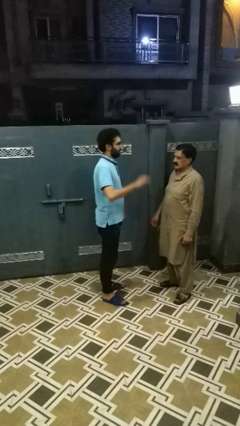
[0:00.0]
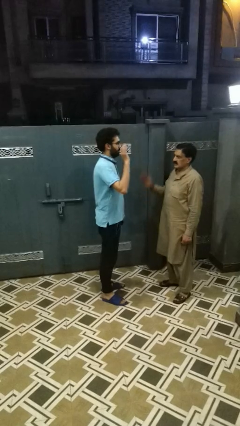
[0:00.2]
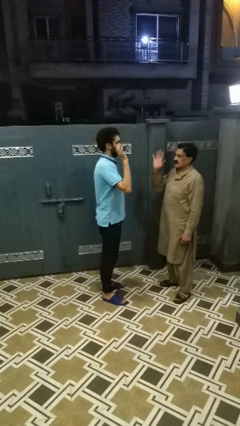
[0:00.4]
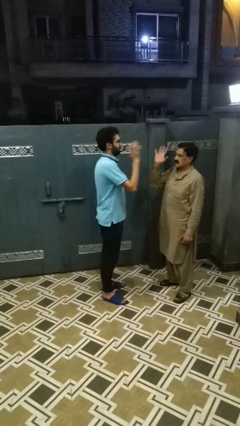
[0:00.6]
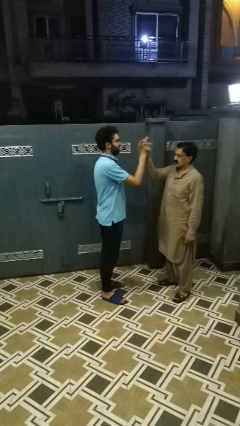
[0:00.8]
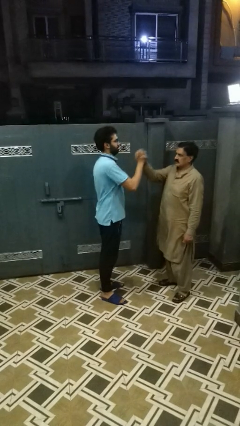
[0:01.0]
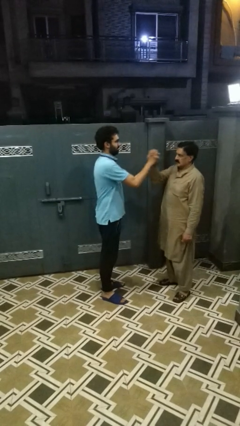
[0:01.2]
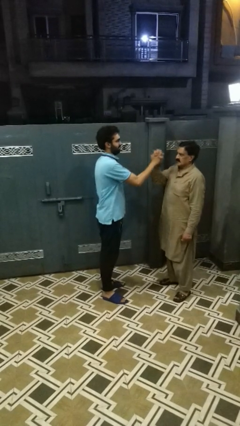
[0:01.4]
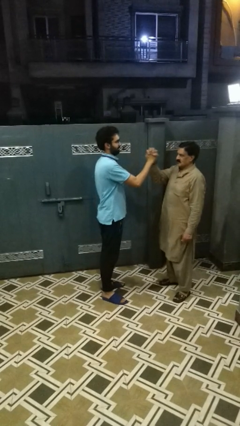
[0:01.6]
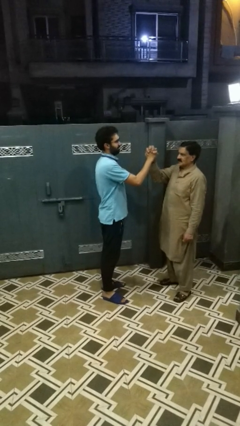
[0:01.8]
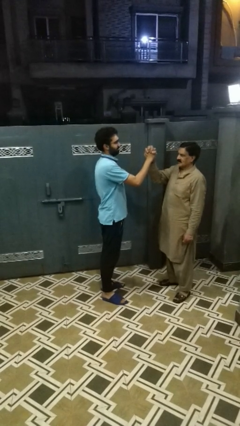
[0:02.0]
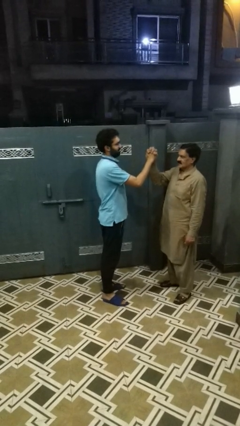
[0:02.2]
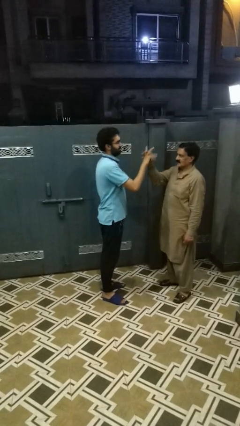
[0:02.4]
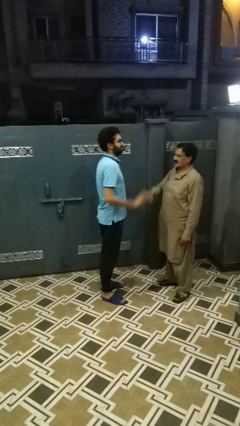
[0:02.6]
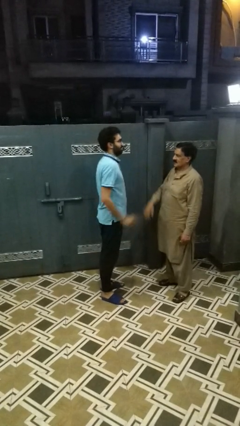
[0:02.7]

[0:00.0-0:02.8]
person highfives hand

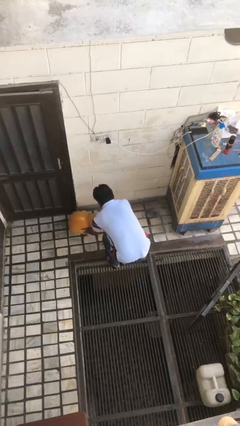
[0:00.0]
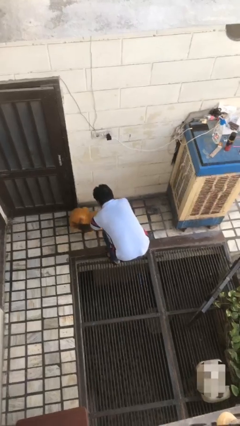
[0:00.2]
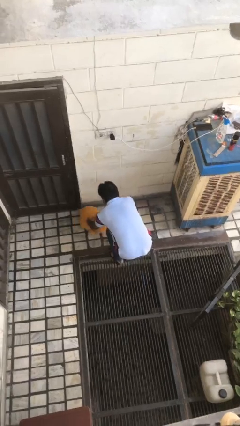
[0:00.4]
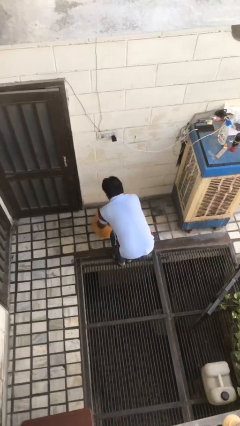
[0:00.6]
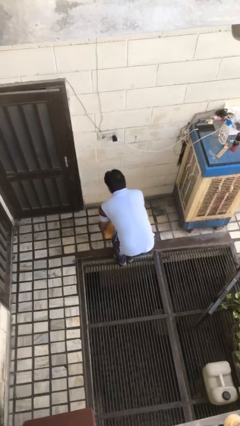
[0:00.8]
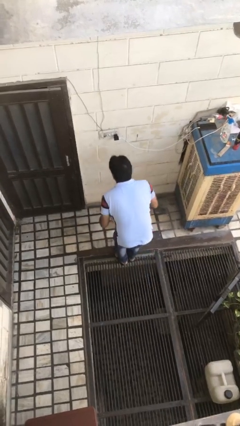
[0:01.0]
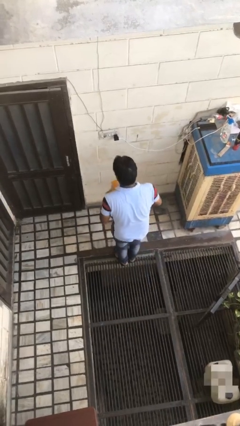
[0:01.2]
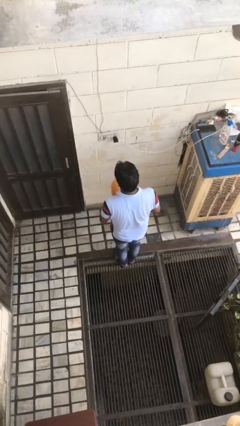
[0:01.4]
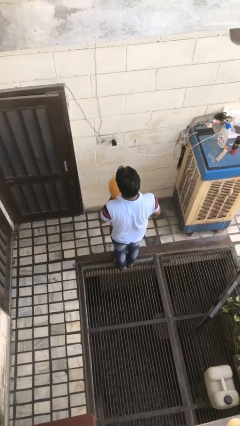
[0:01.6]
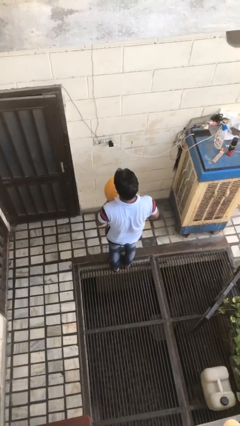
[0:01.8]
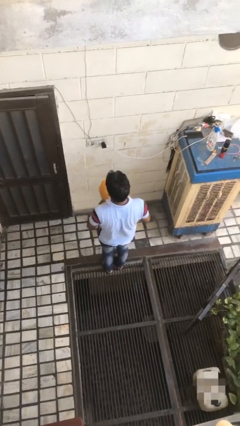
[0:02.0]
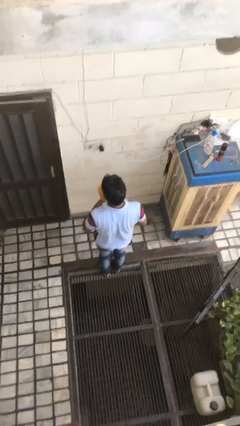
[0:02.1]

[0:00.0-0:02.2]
person picks up object from floor

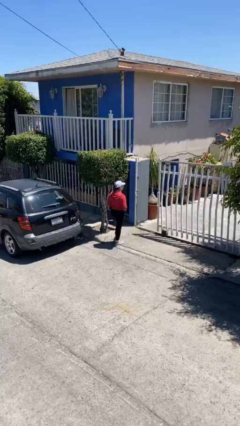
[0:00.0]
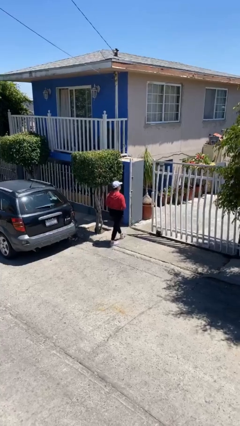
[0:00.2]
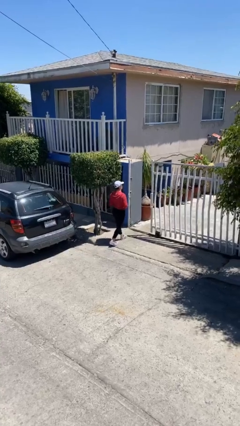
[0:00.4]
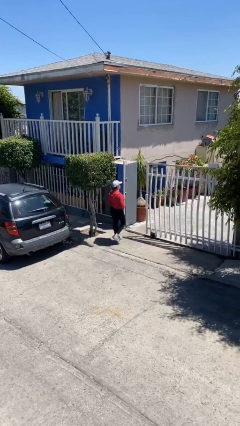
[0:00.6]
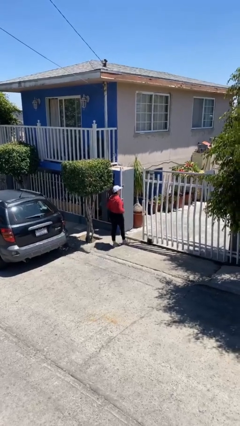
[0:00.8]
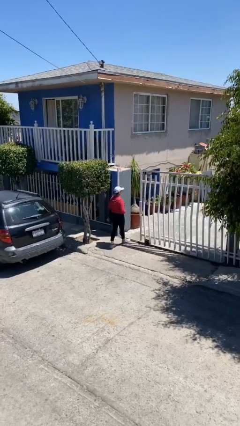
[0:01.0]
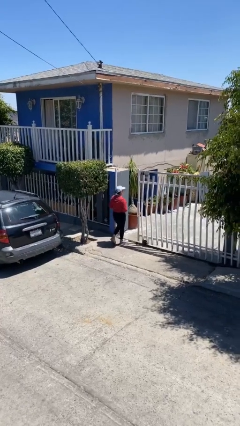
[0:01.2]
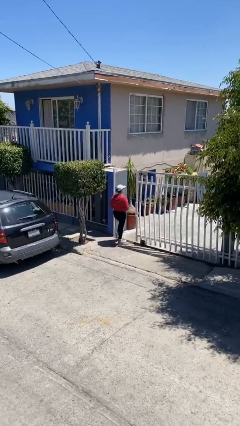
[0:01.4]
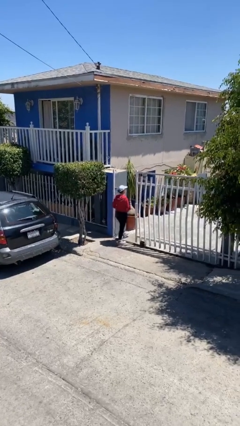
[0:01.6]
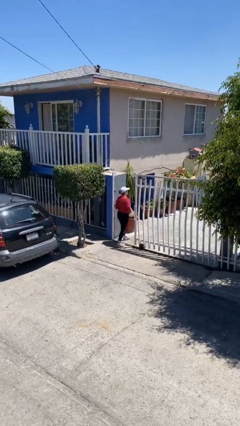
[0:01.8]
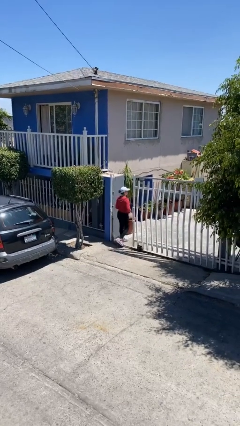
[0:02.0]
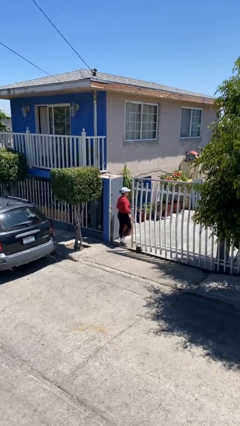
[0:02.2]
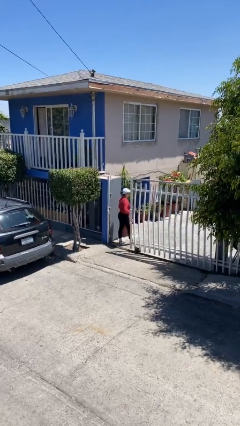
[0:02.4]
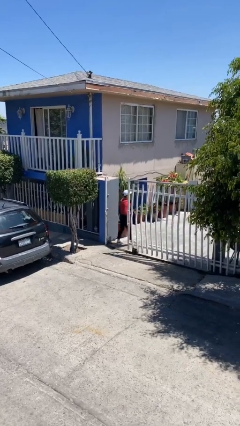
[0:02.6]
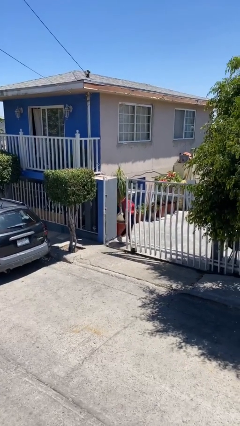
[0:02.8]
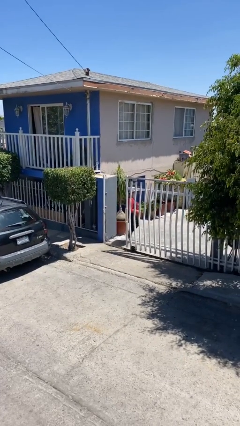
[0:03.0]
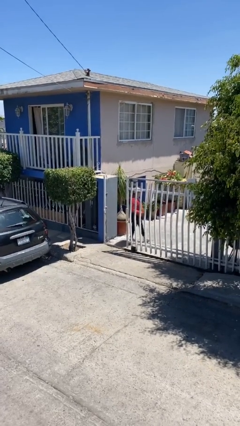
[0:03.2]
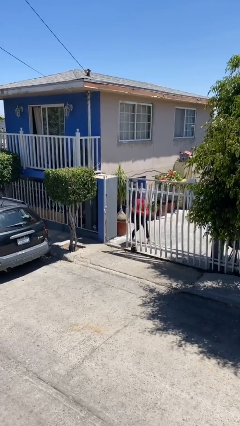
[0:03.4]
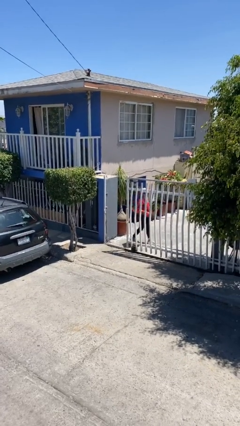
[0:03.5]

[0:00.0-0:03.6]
person exits scene through structure

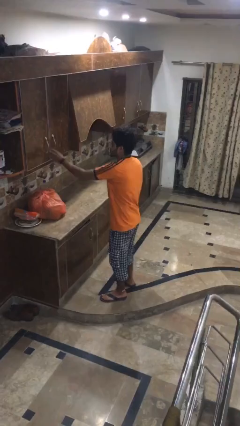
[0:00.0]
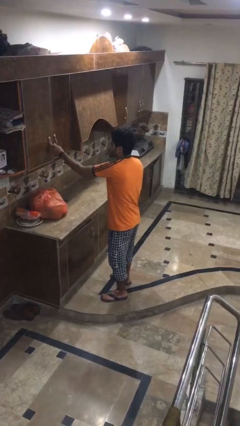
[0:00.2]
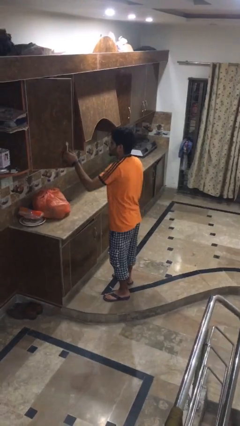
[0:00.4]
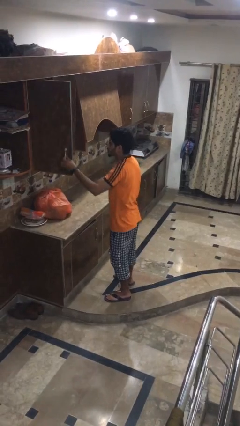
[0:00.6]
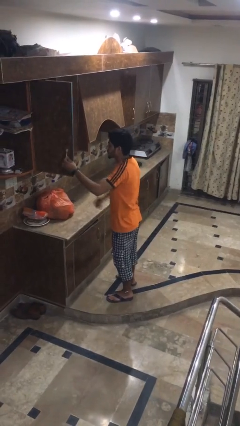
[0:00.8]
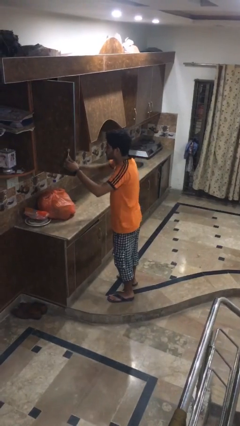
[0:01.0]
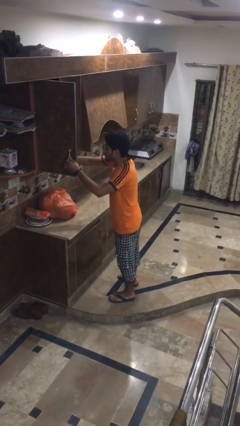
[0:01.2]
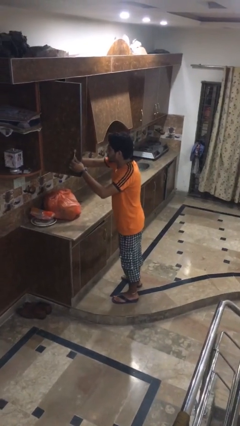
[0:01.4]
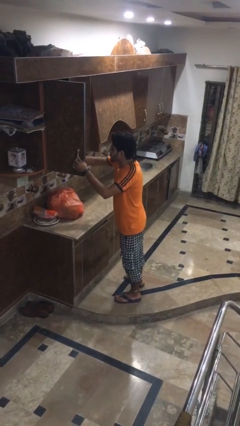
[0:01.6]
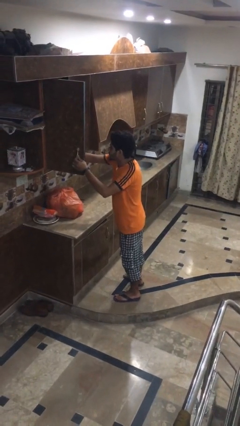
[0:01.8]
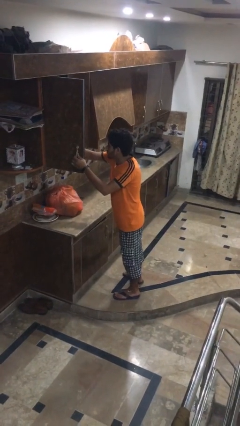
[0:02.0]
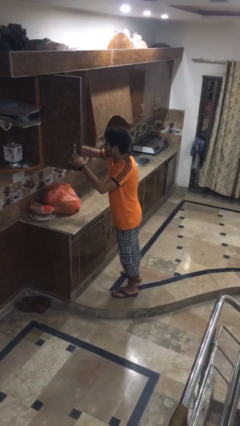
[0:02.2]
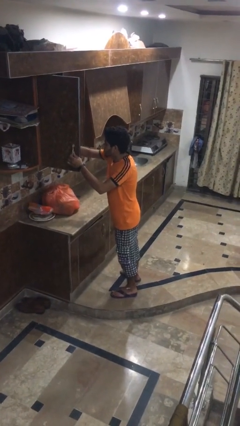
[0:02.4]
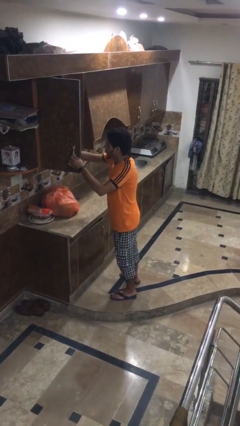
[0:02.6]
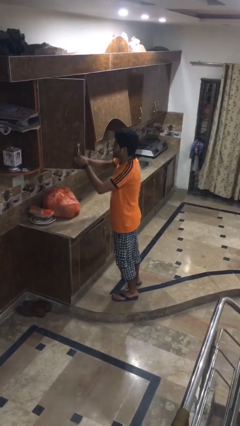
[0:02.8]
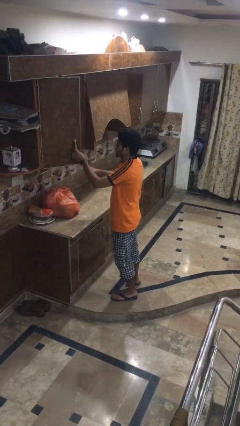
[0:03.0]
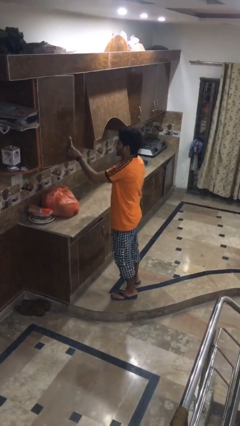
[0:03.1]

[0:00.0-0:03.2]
person searches in kitchen drawer

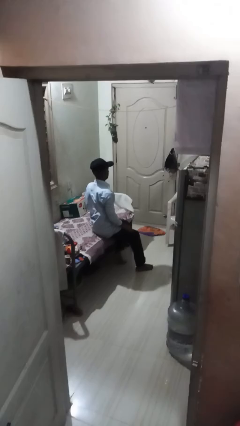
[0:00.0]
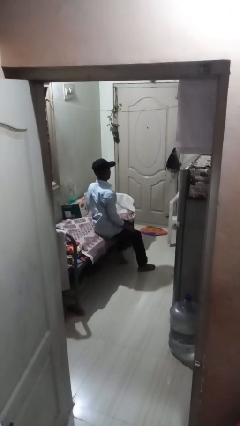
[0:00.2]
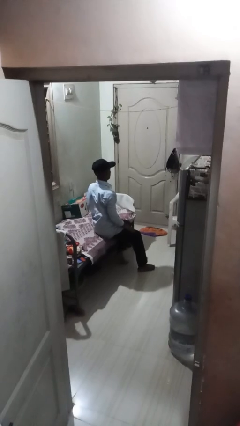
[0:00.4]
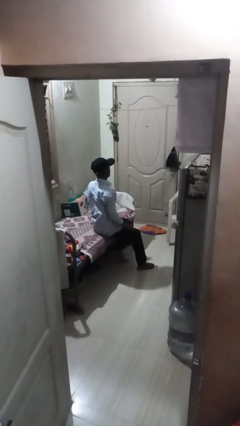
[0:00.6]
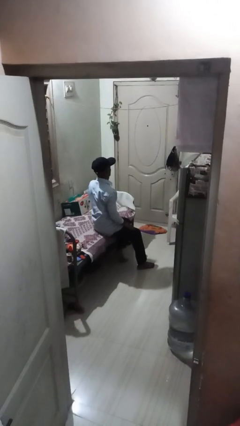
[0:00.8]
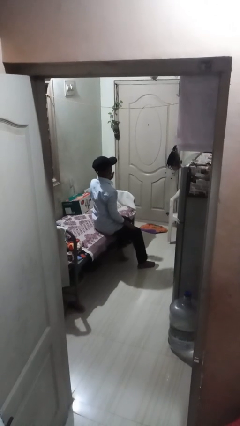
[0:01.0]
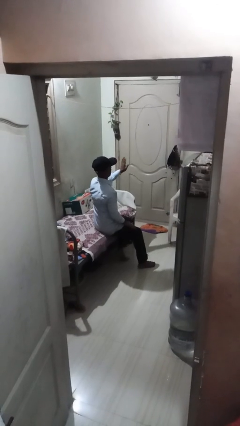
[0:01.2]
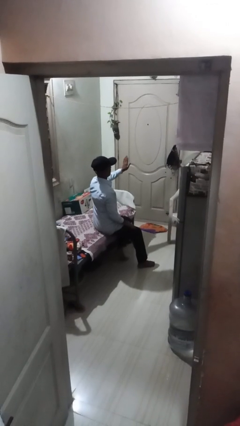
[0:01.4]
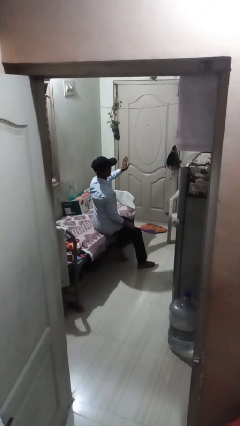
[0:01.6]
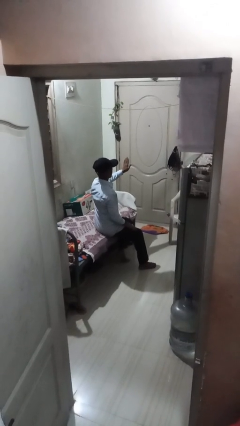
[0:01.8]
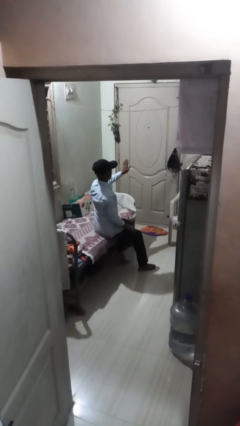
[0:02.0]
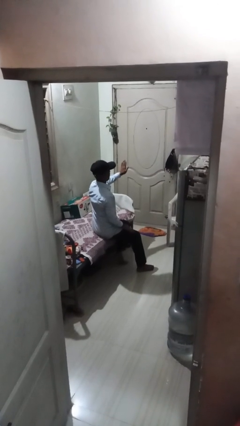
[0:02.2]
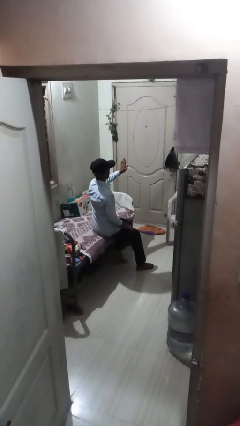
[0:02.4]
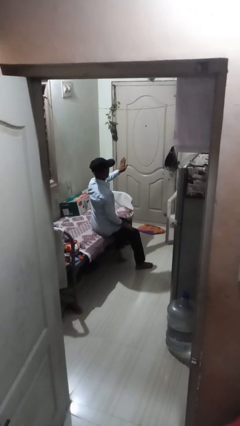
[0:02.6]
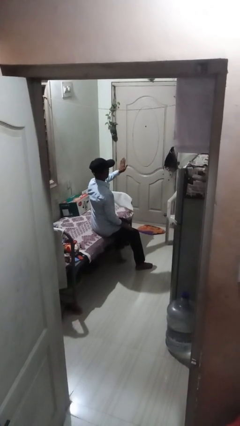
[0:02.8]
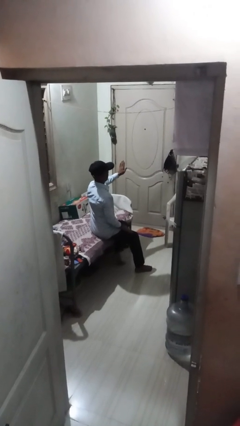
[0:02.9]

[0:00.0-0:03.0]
person gestures stop

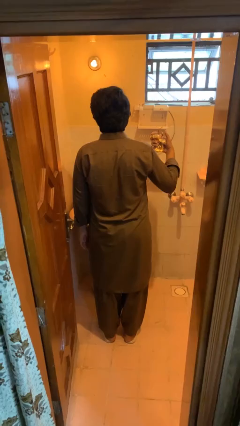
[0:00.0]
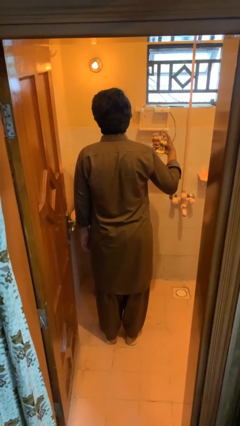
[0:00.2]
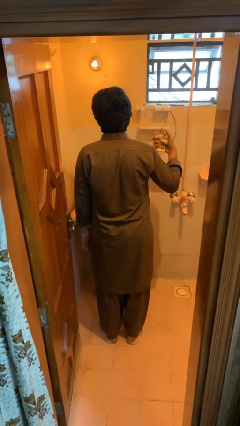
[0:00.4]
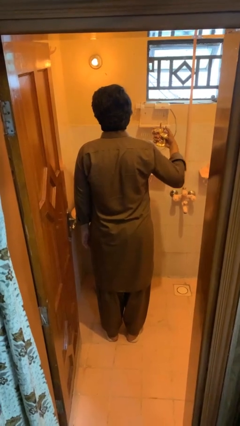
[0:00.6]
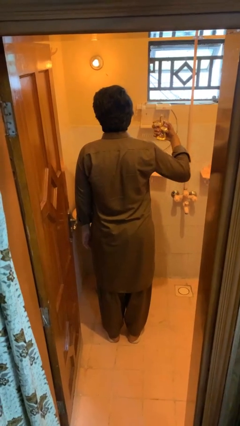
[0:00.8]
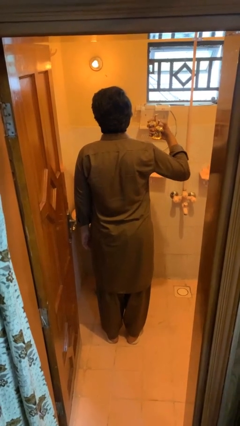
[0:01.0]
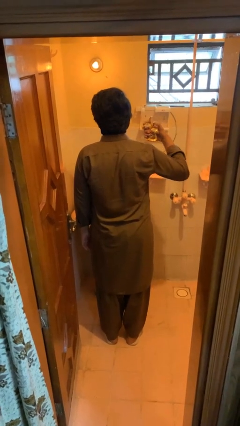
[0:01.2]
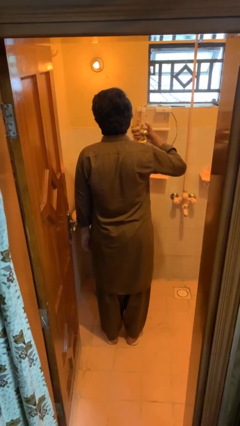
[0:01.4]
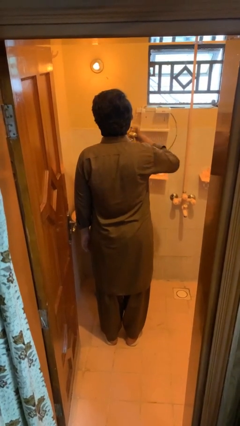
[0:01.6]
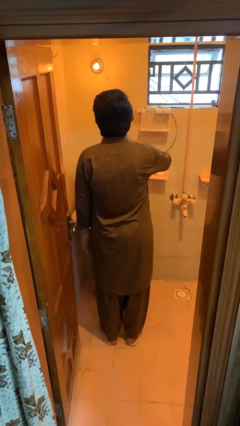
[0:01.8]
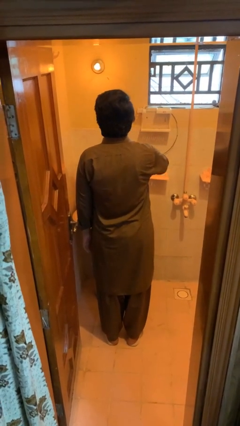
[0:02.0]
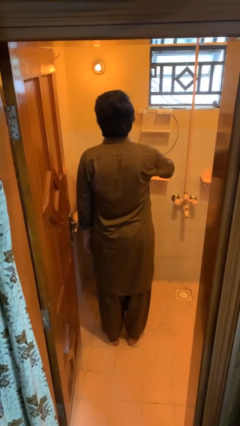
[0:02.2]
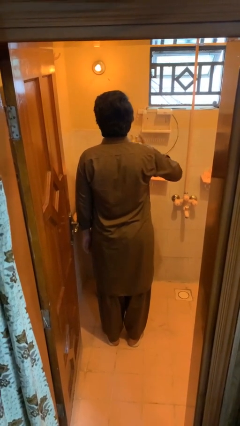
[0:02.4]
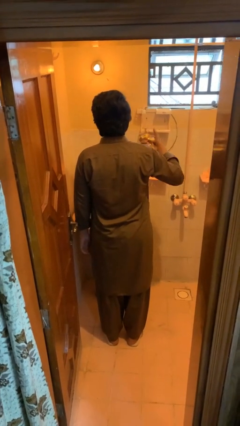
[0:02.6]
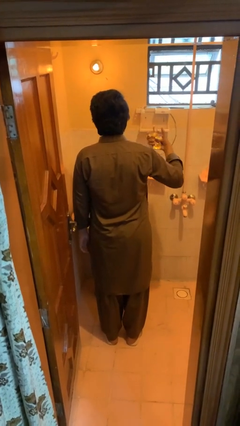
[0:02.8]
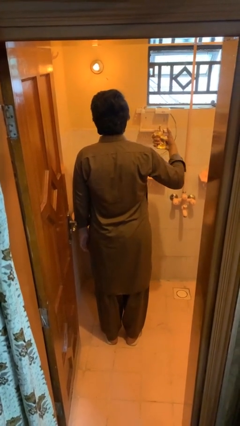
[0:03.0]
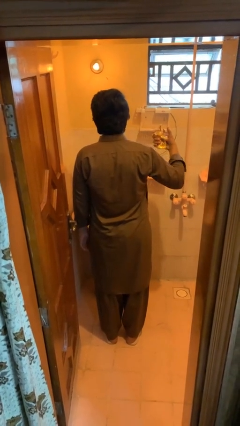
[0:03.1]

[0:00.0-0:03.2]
person applies deodorant
